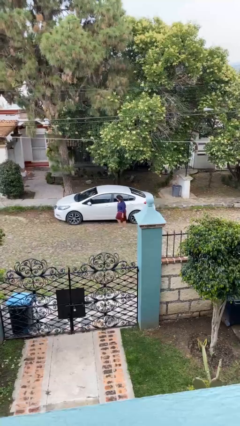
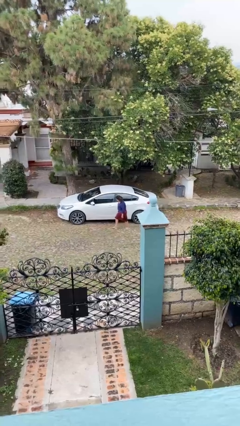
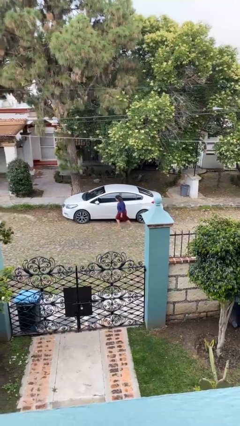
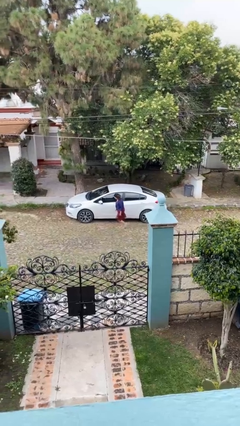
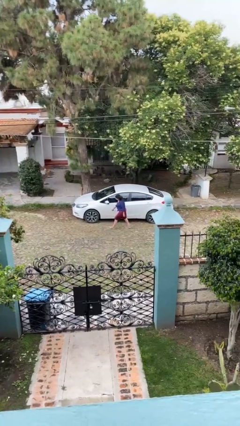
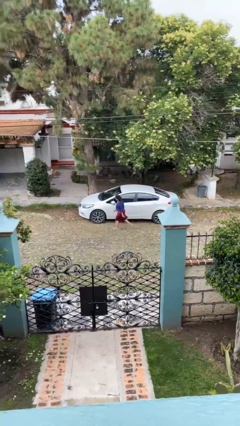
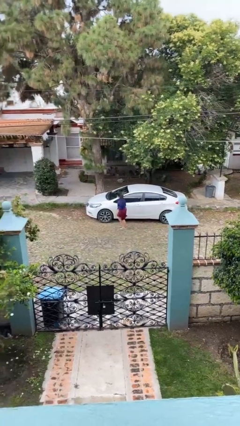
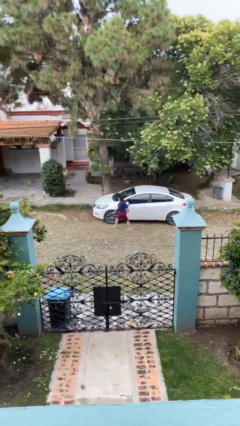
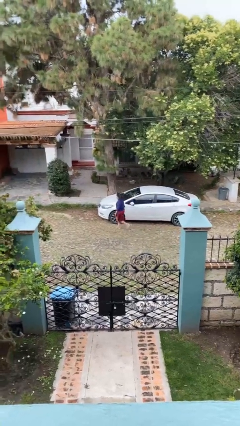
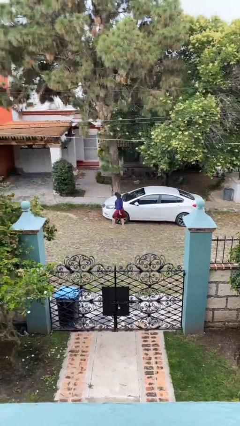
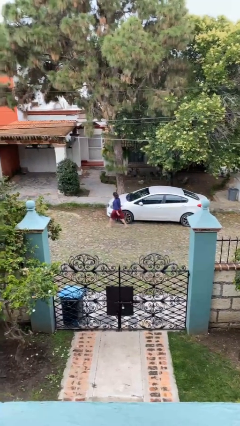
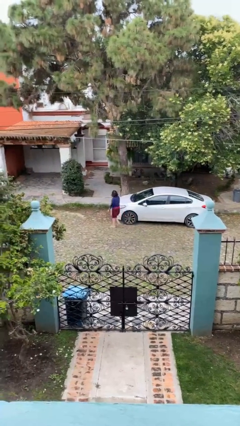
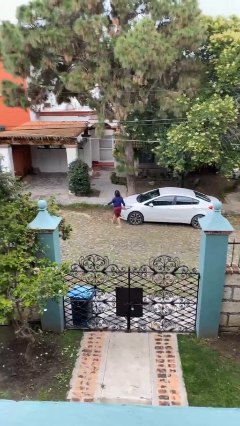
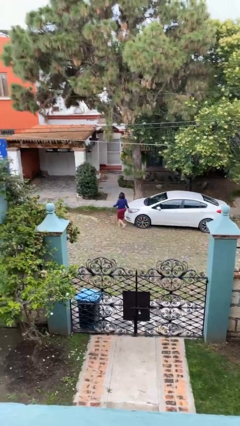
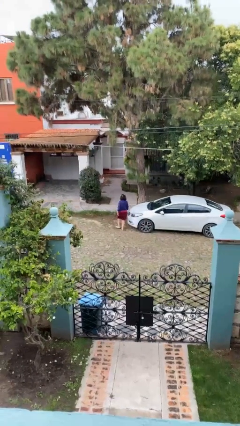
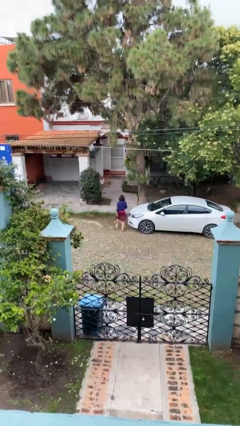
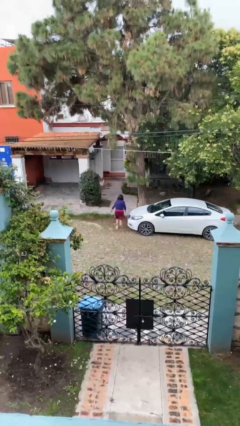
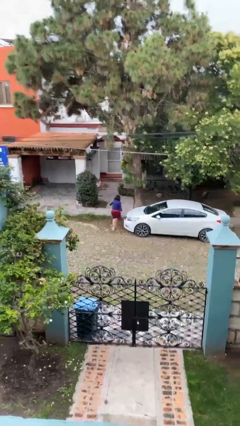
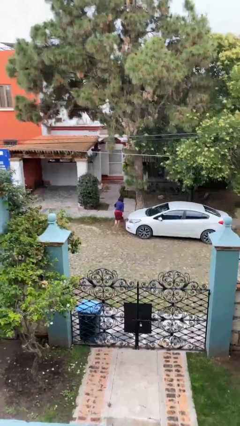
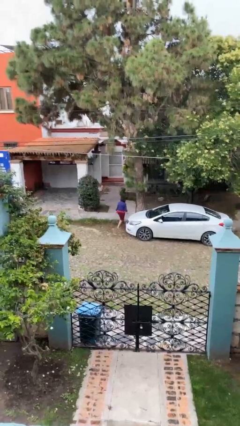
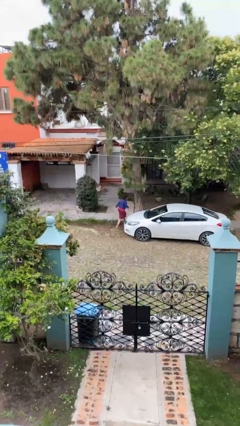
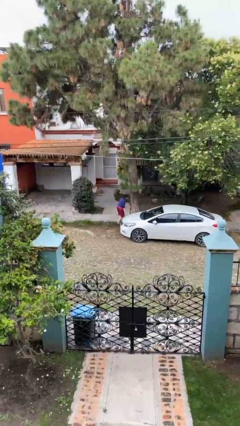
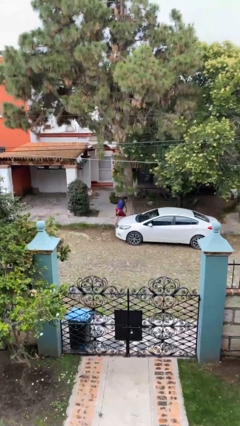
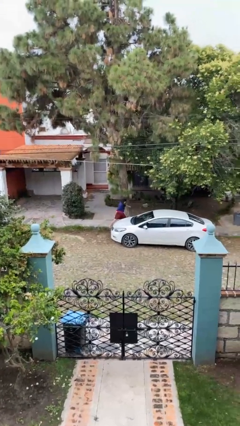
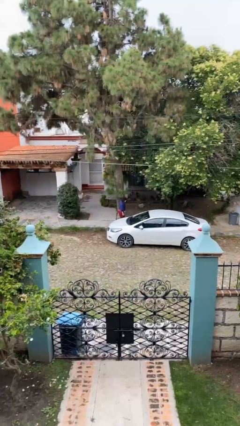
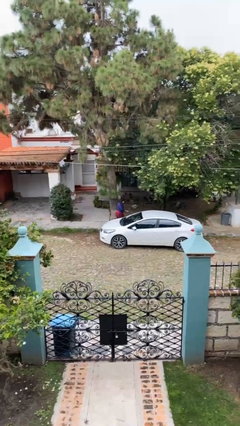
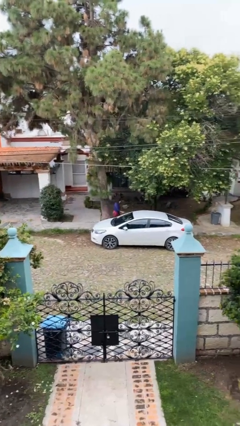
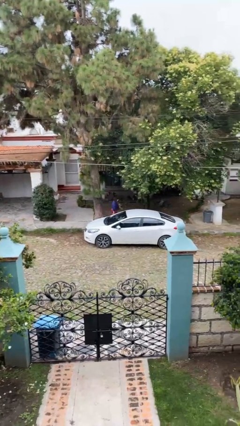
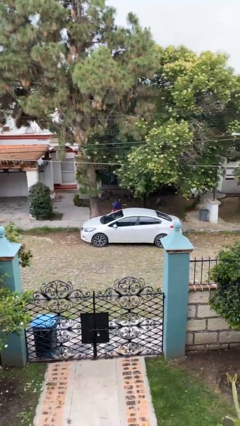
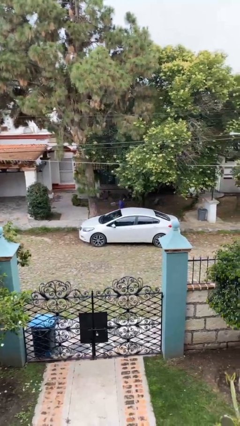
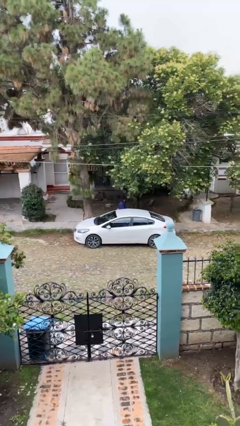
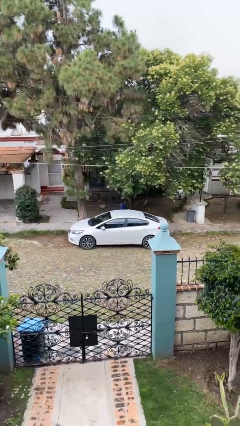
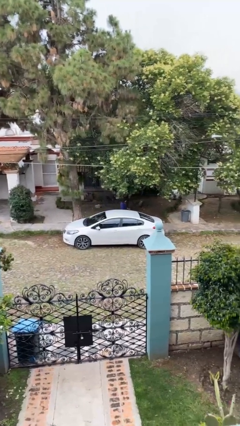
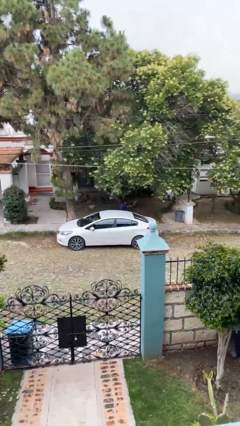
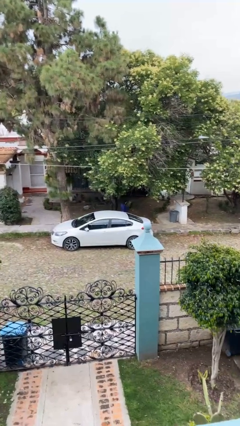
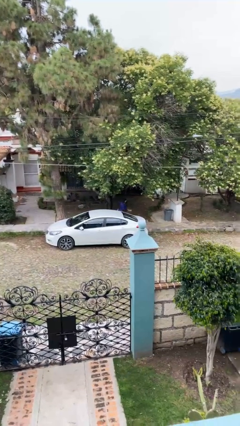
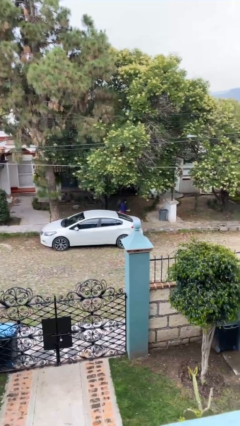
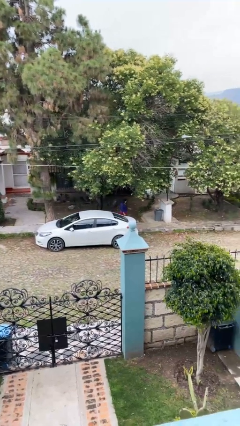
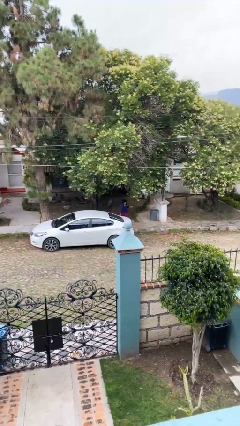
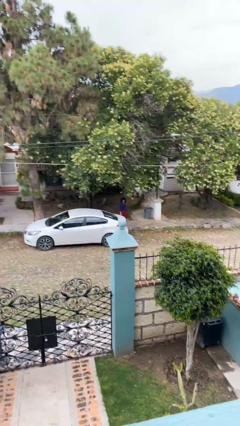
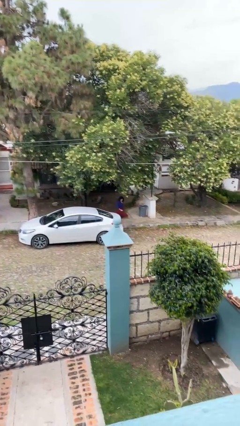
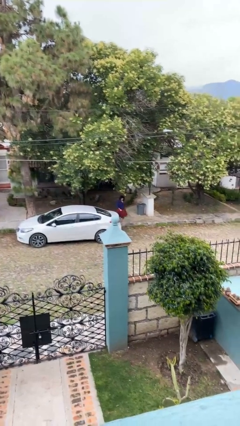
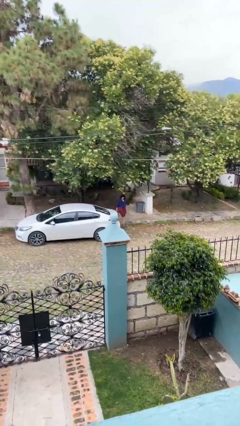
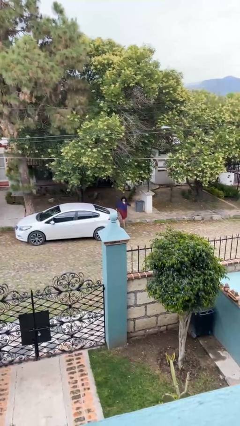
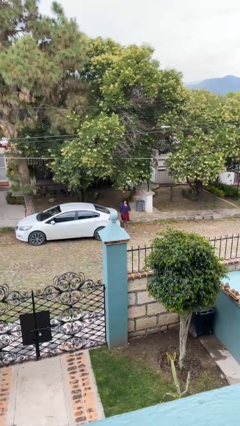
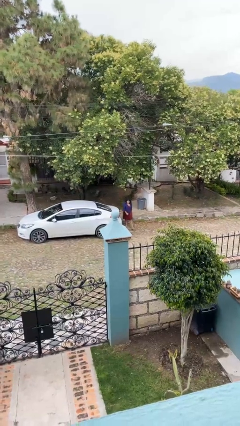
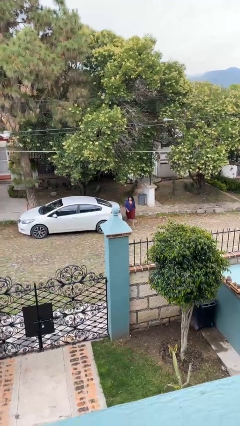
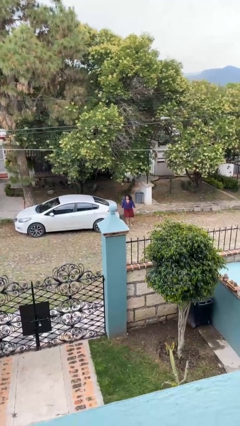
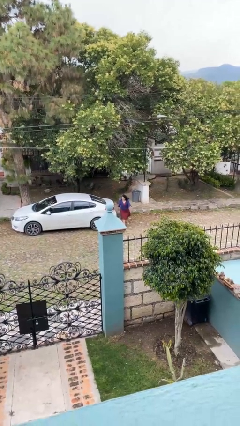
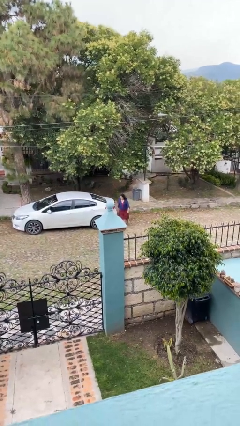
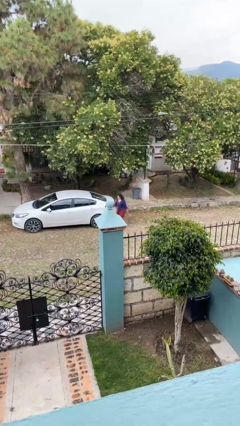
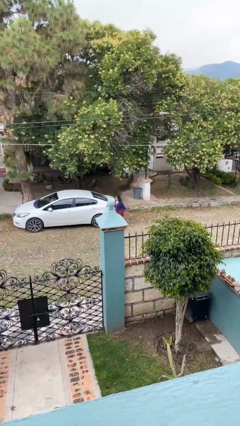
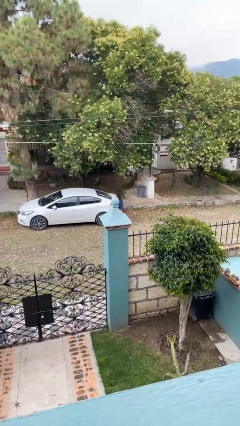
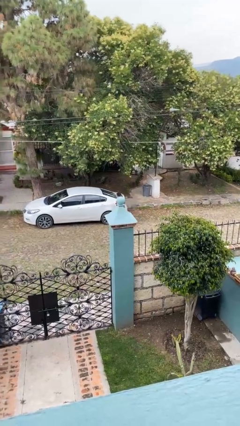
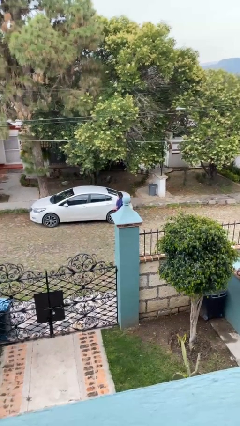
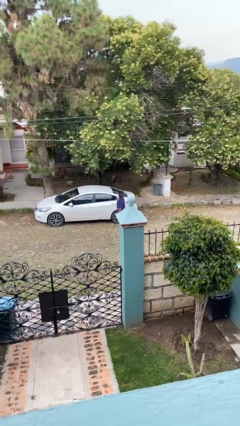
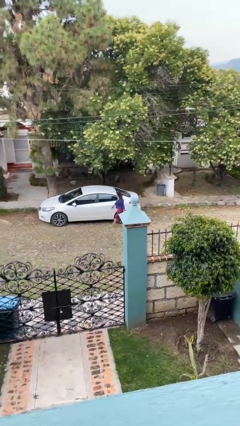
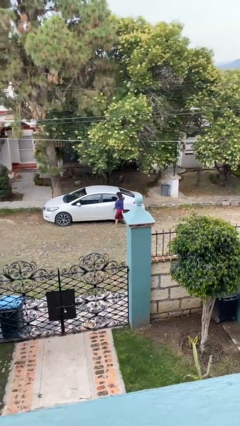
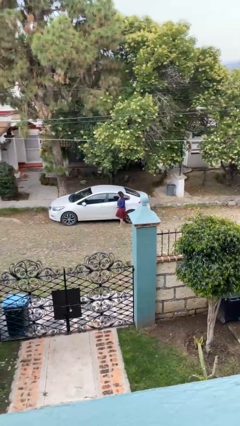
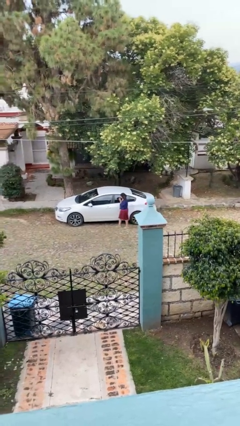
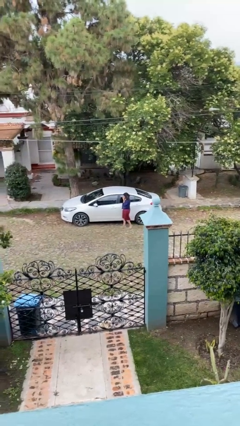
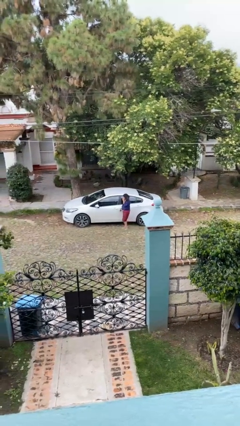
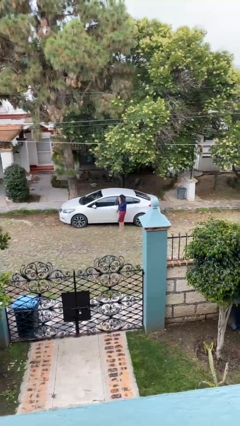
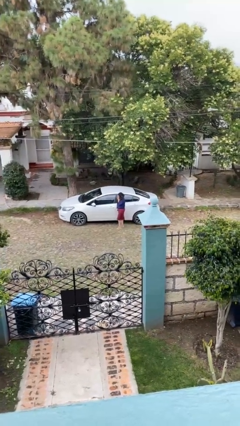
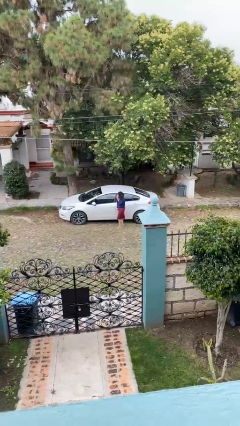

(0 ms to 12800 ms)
person walks around car

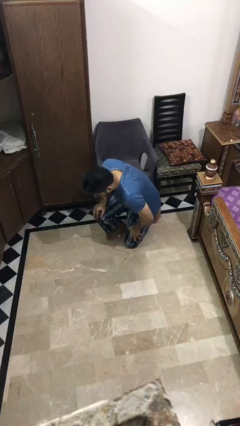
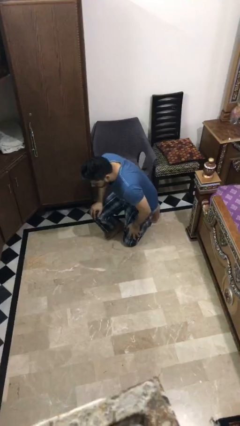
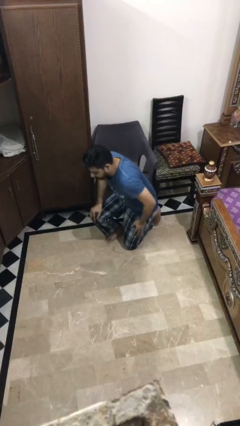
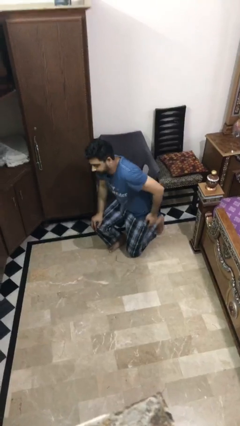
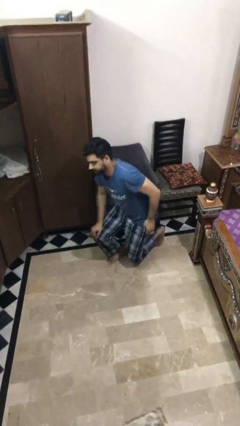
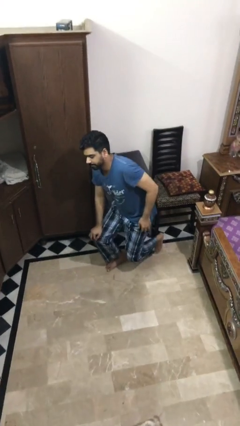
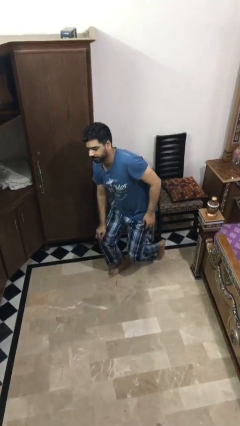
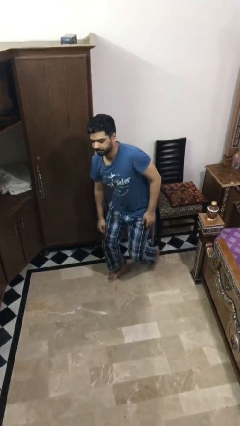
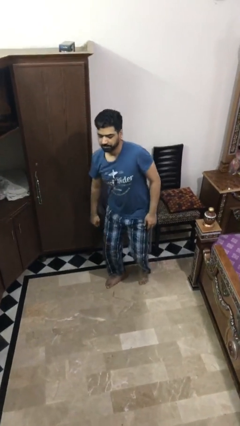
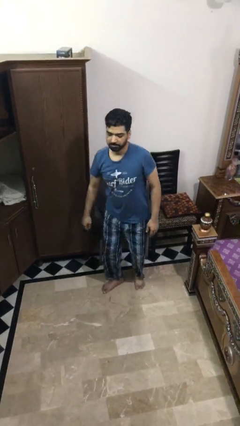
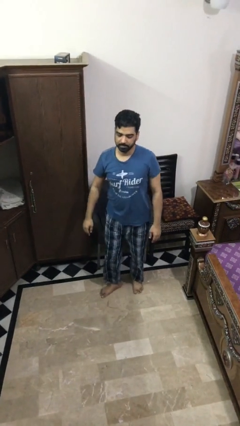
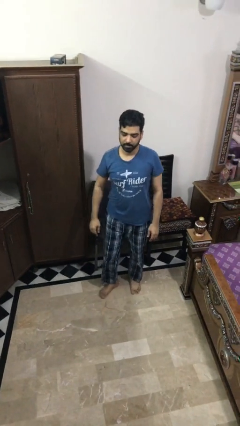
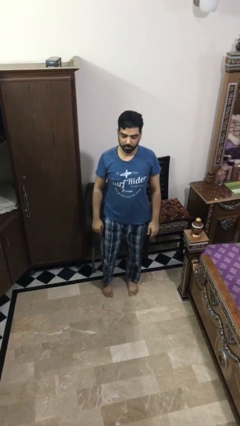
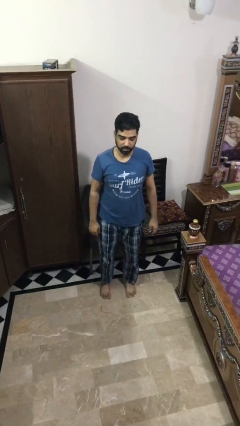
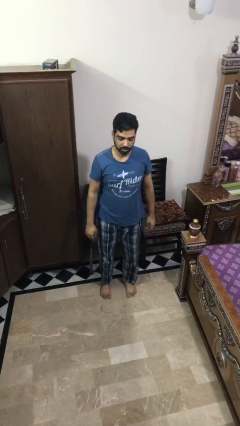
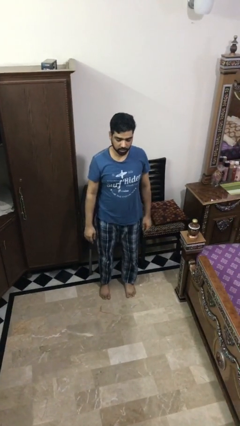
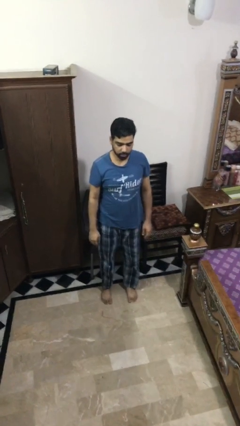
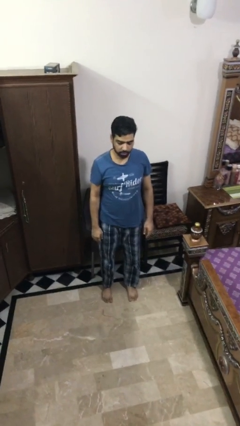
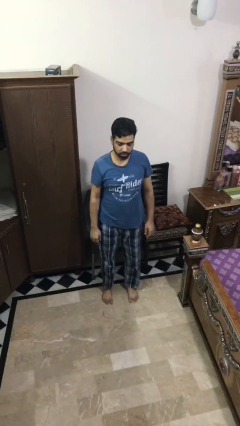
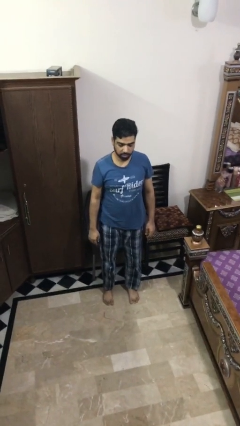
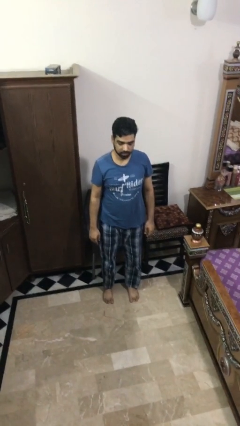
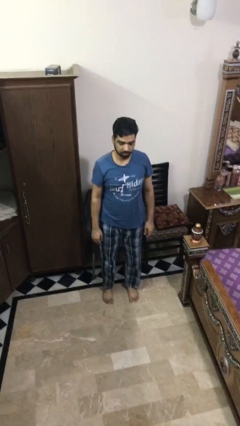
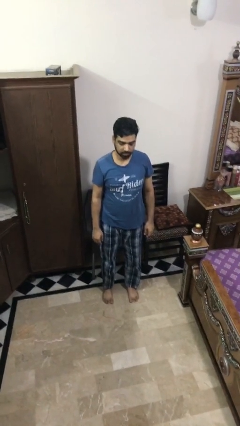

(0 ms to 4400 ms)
person stands up from floor

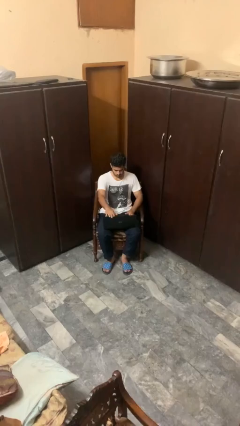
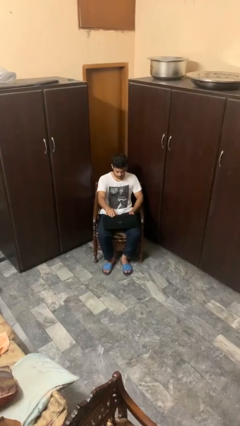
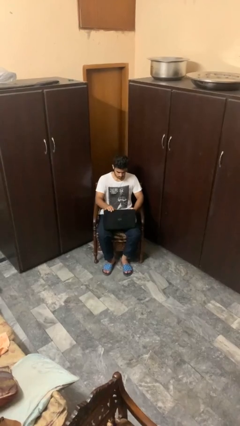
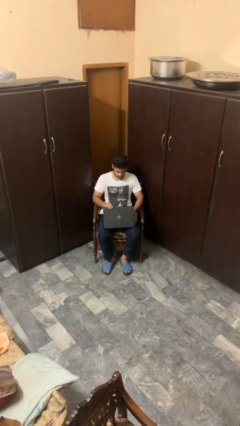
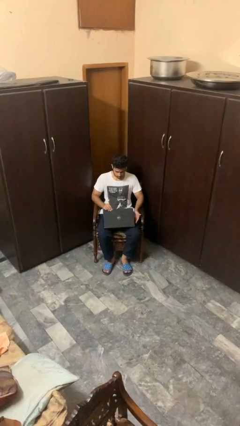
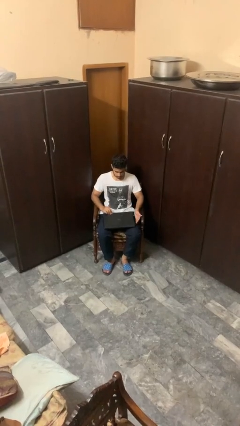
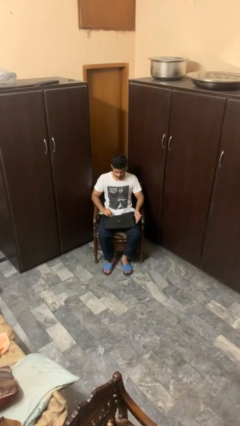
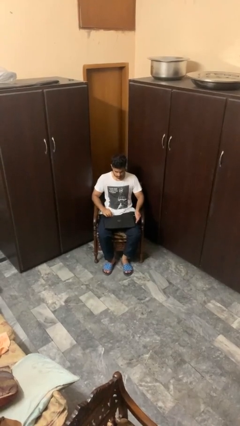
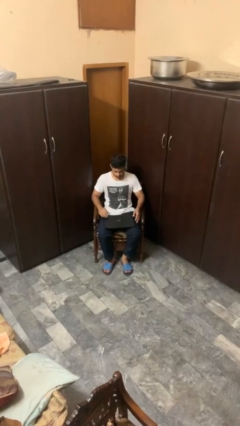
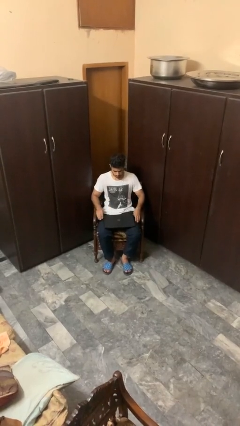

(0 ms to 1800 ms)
person closes laptop
